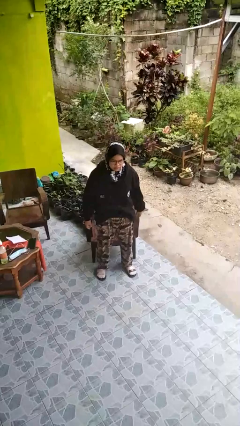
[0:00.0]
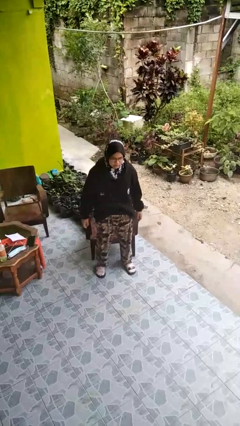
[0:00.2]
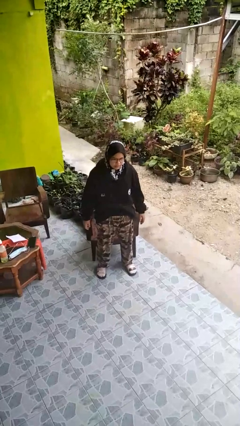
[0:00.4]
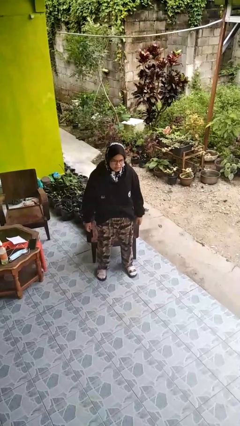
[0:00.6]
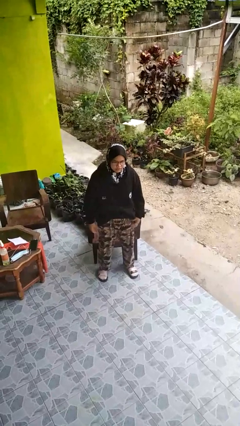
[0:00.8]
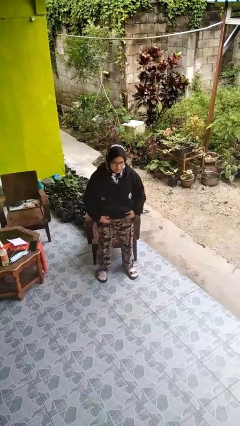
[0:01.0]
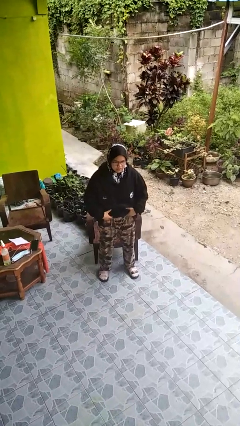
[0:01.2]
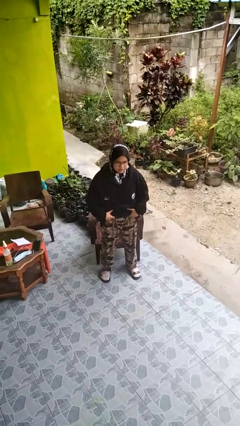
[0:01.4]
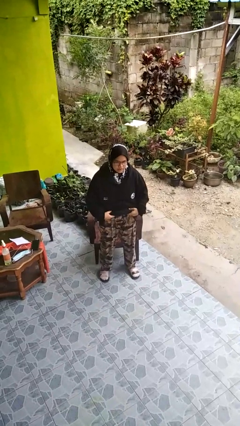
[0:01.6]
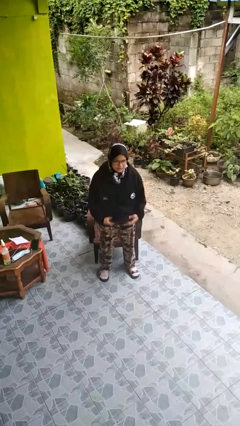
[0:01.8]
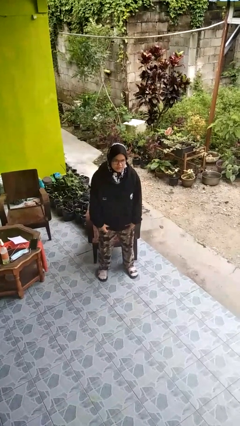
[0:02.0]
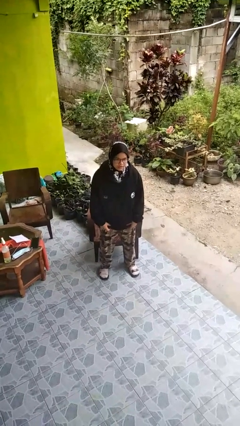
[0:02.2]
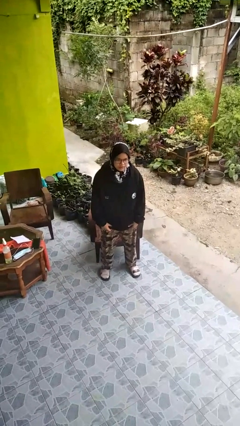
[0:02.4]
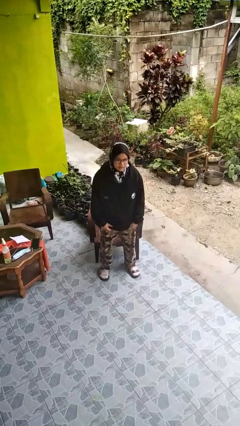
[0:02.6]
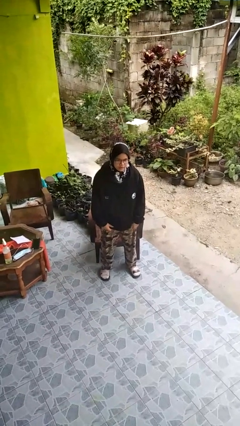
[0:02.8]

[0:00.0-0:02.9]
person untucks shirt

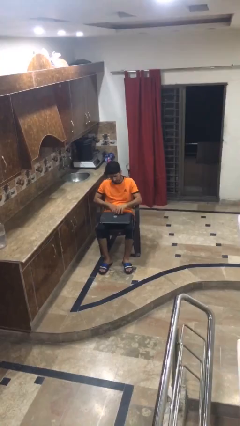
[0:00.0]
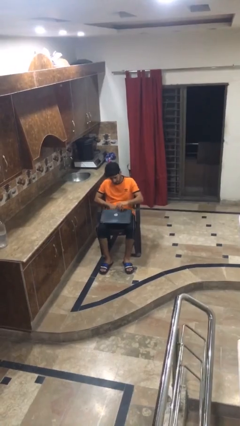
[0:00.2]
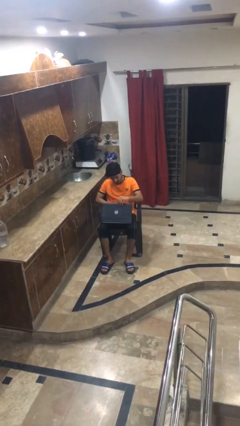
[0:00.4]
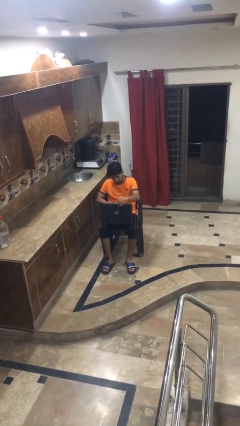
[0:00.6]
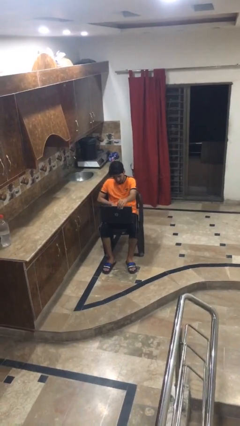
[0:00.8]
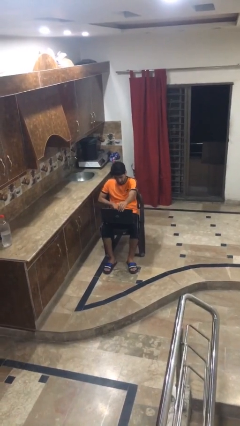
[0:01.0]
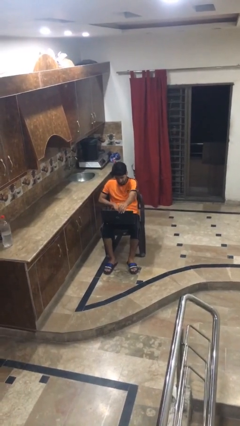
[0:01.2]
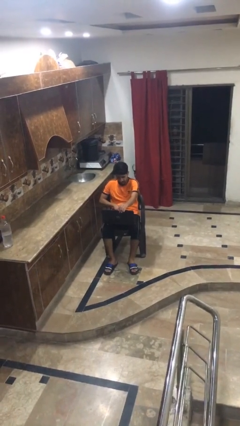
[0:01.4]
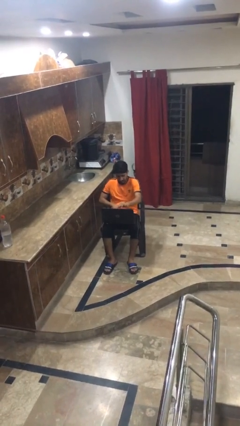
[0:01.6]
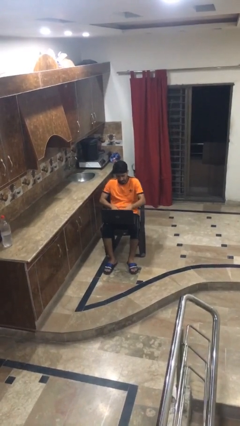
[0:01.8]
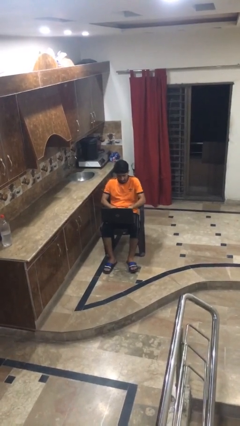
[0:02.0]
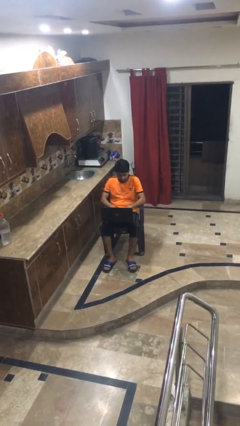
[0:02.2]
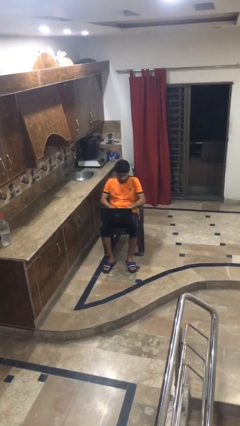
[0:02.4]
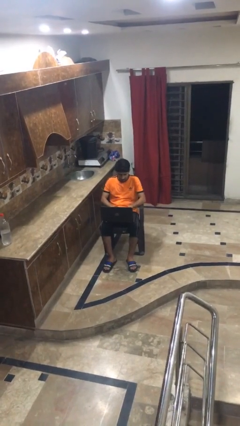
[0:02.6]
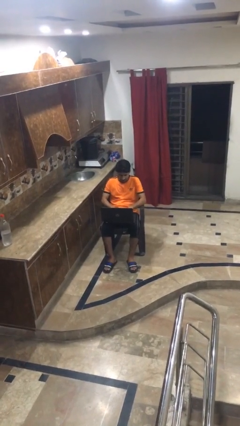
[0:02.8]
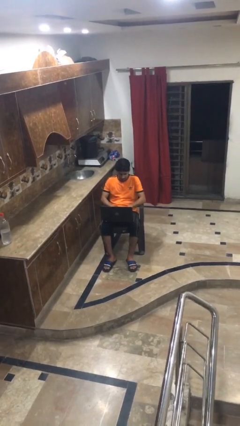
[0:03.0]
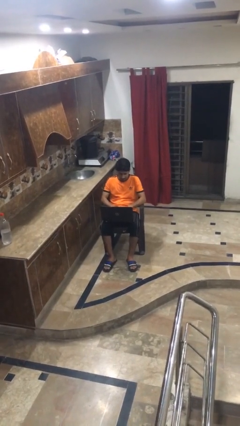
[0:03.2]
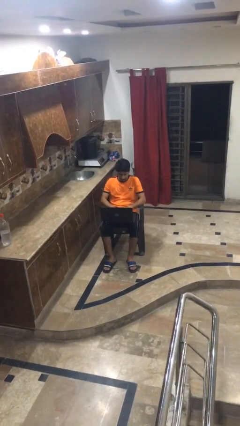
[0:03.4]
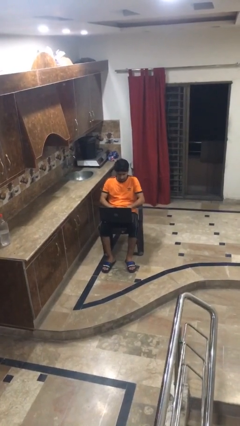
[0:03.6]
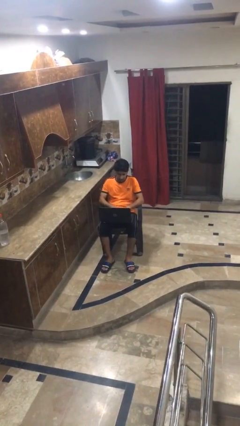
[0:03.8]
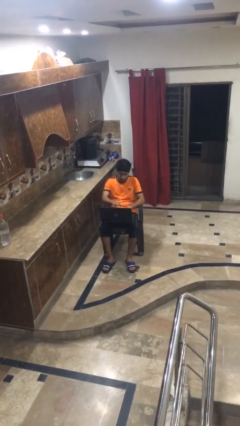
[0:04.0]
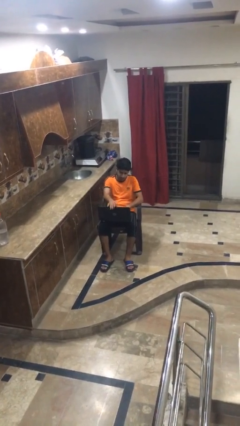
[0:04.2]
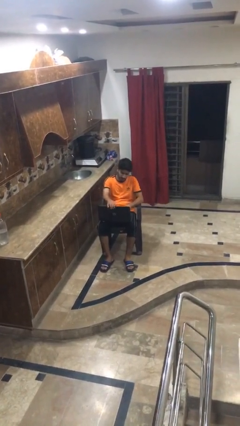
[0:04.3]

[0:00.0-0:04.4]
person opens laptop

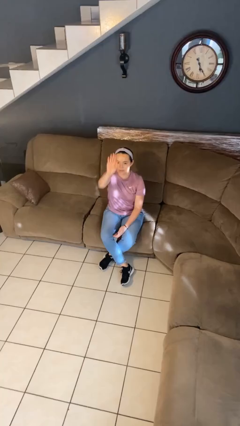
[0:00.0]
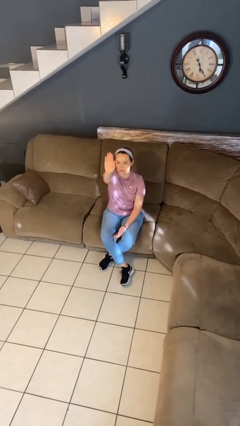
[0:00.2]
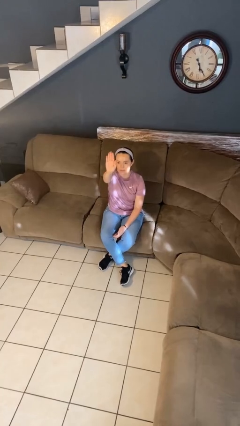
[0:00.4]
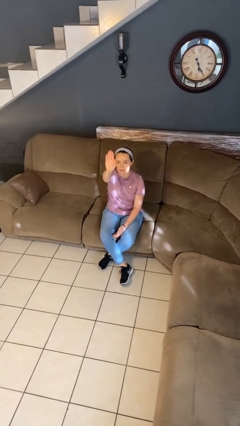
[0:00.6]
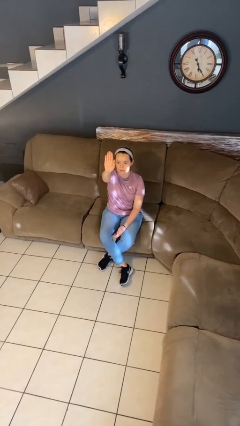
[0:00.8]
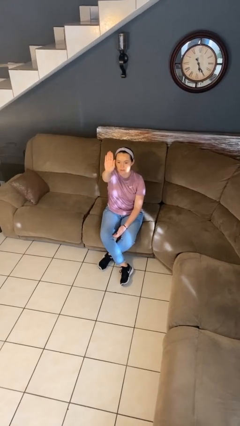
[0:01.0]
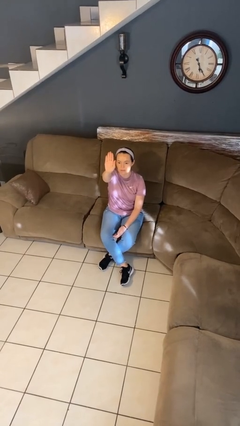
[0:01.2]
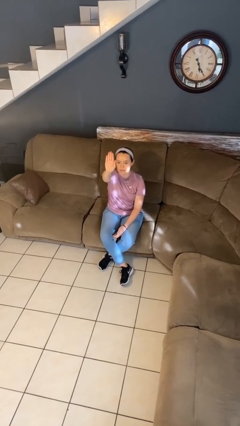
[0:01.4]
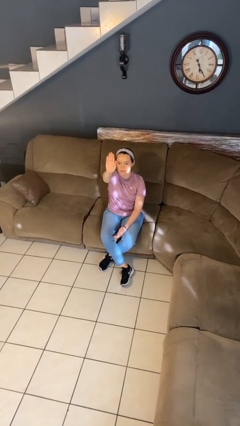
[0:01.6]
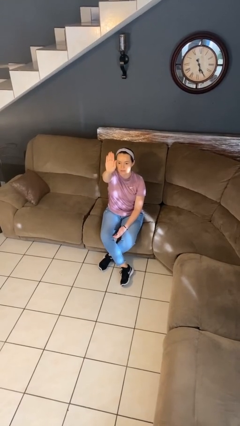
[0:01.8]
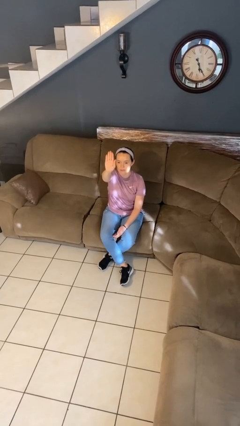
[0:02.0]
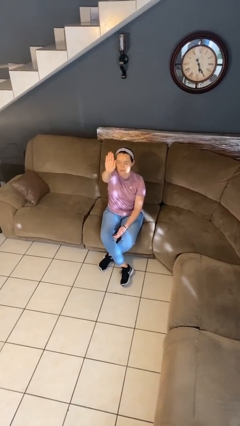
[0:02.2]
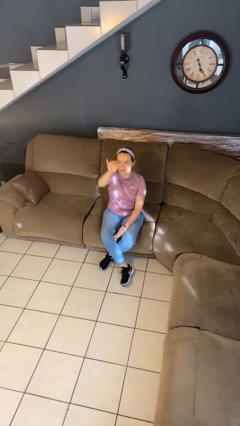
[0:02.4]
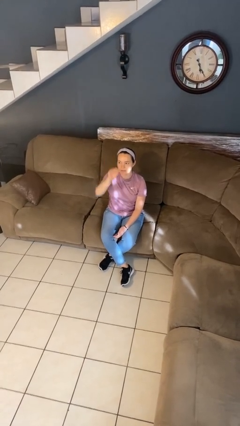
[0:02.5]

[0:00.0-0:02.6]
person gestures stop

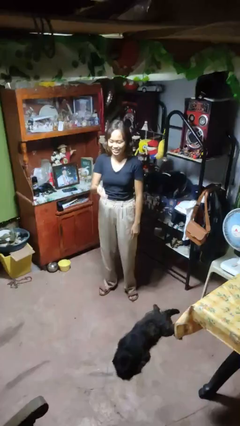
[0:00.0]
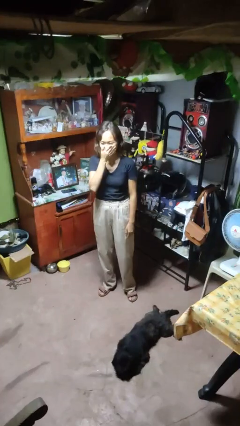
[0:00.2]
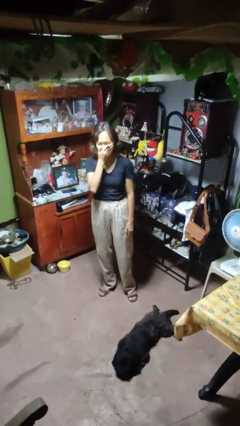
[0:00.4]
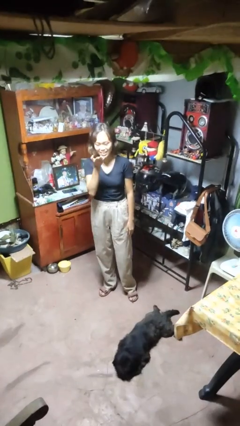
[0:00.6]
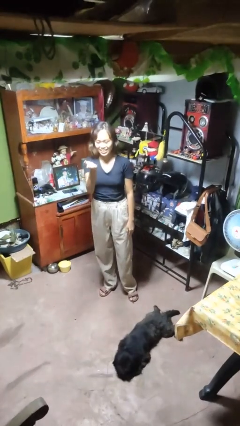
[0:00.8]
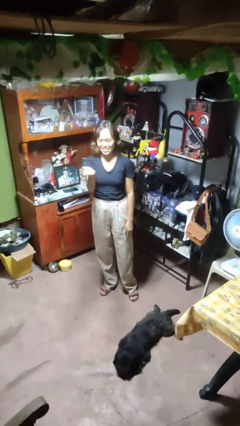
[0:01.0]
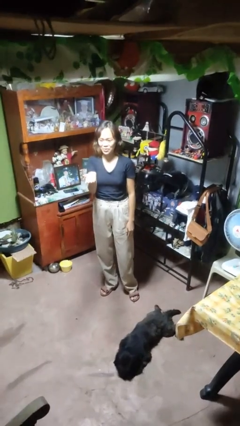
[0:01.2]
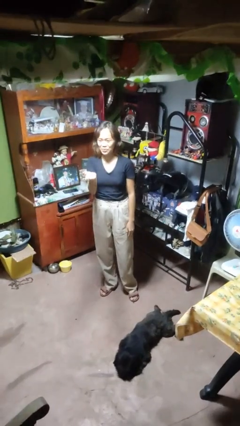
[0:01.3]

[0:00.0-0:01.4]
person gestures blow kiss

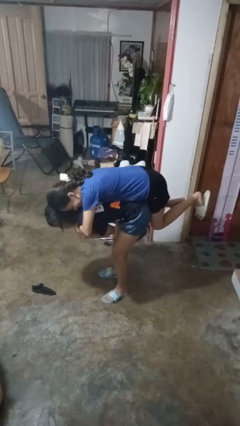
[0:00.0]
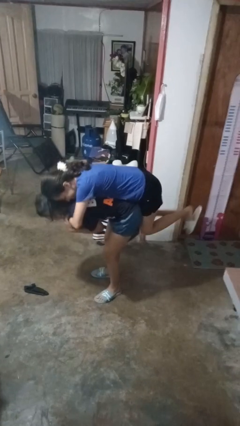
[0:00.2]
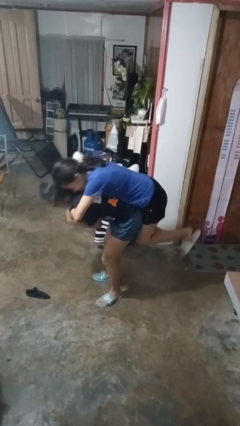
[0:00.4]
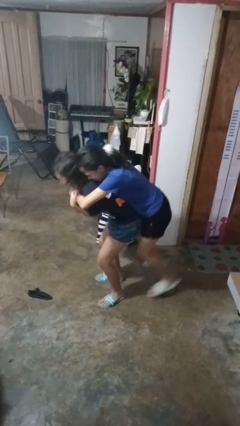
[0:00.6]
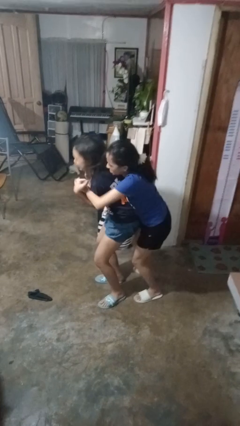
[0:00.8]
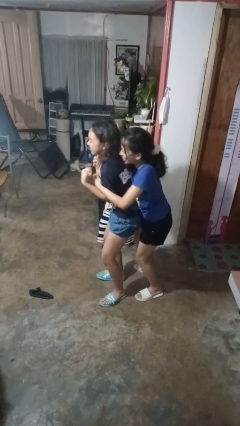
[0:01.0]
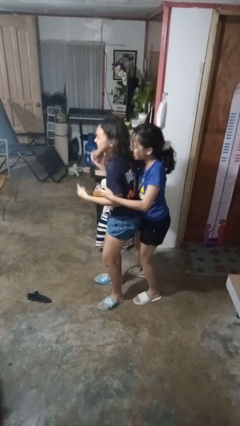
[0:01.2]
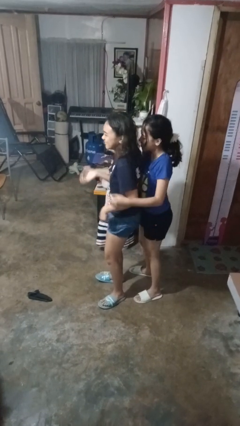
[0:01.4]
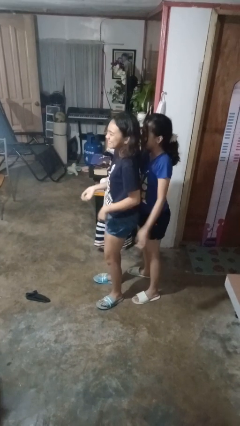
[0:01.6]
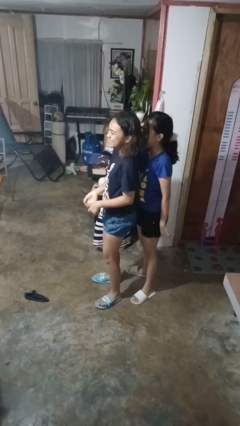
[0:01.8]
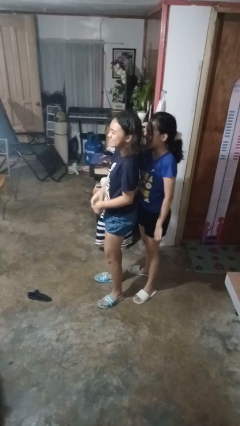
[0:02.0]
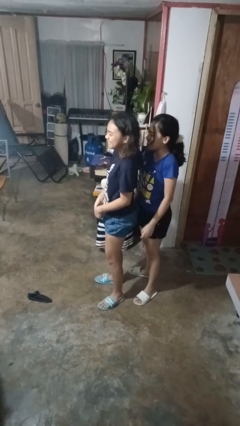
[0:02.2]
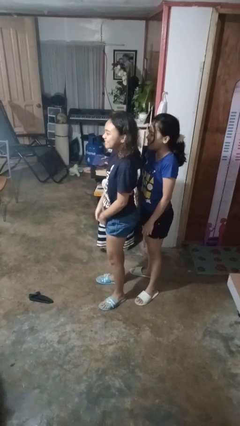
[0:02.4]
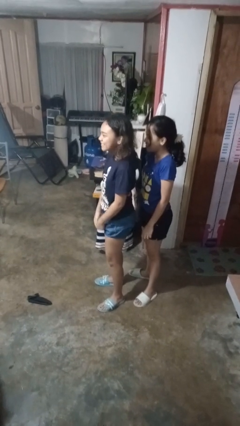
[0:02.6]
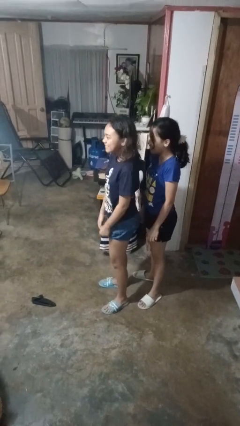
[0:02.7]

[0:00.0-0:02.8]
person puts down person

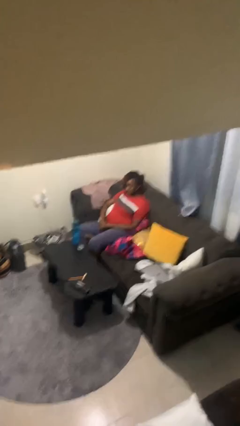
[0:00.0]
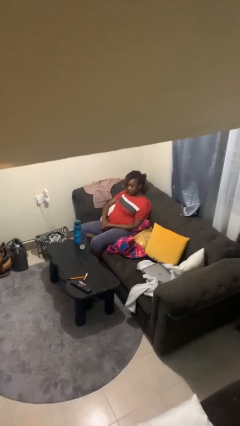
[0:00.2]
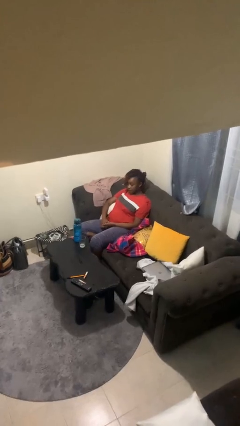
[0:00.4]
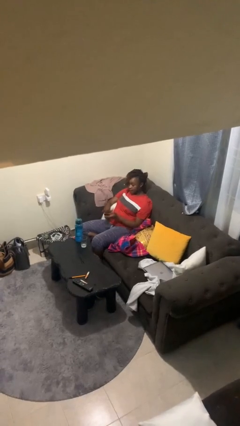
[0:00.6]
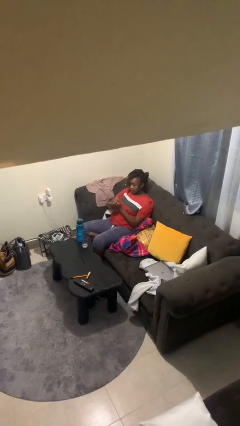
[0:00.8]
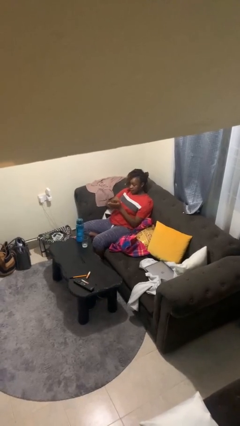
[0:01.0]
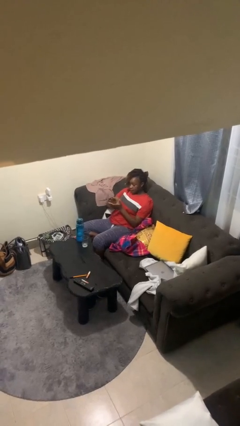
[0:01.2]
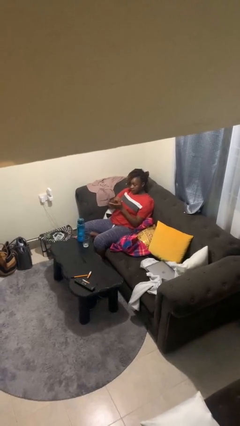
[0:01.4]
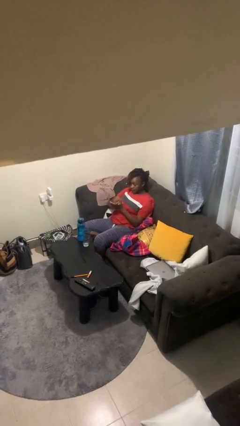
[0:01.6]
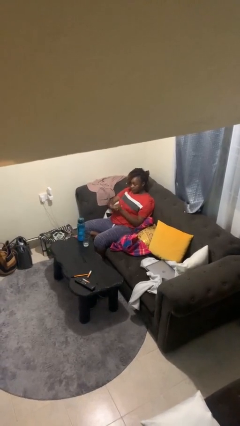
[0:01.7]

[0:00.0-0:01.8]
person claps hands

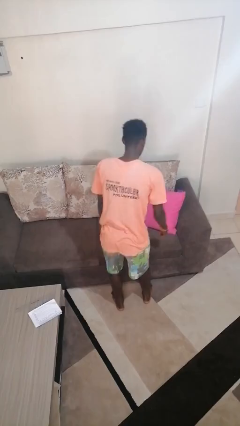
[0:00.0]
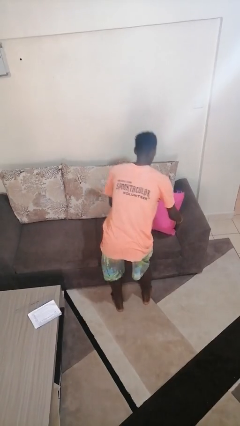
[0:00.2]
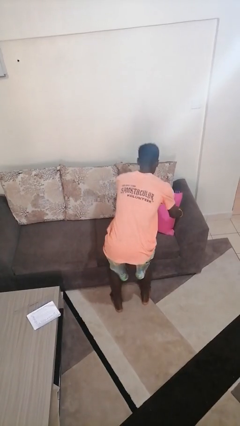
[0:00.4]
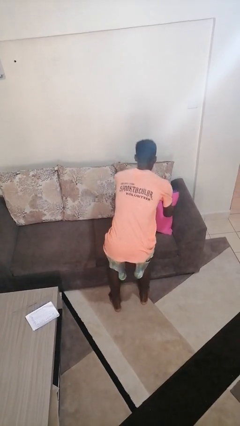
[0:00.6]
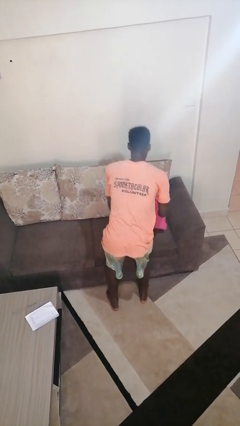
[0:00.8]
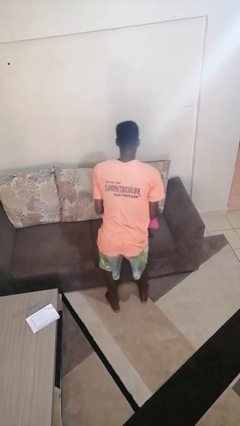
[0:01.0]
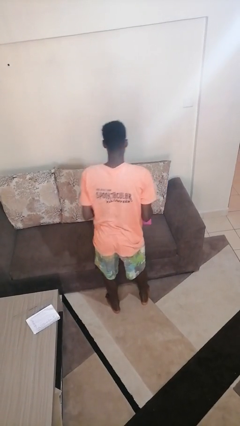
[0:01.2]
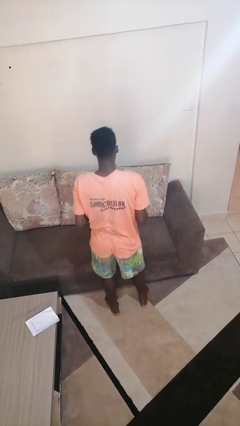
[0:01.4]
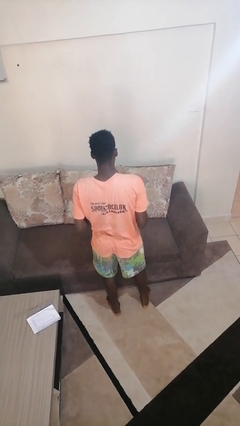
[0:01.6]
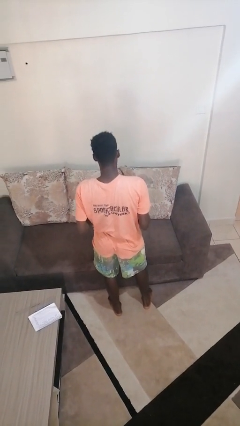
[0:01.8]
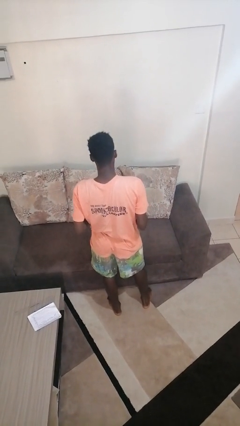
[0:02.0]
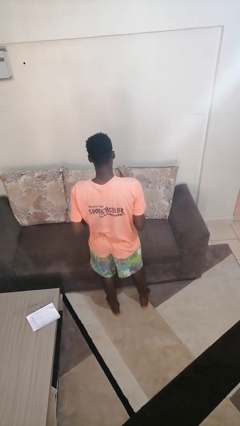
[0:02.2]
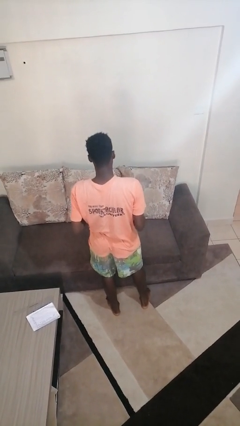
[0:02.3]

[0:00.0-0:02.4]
person picks up object from couch
